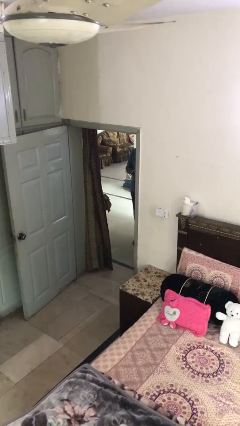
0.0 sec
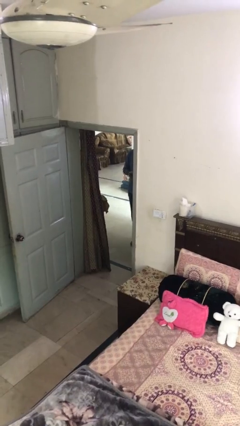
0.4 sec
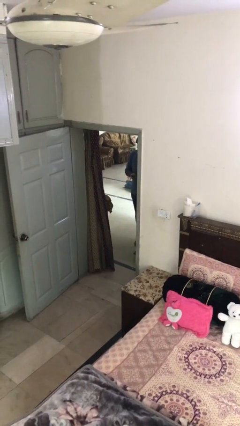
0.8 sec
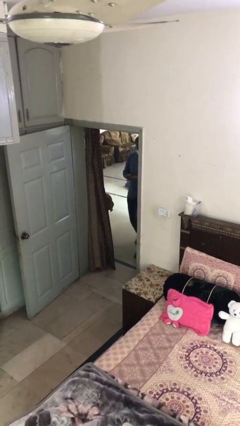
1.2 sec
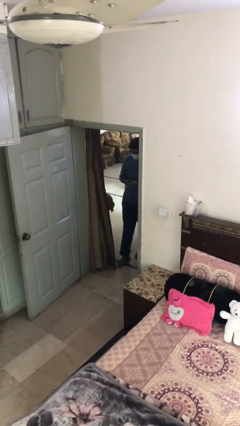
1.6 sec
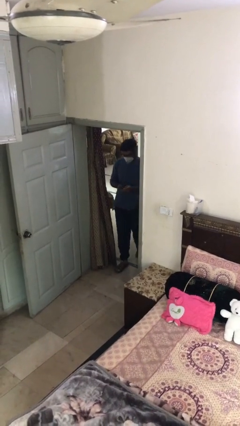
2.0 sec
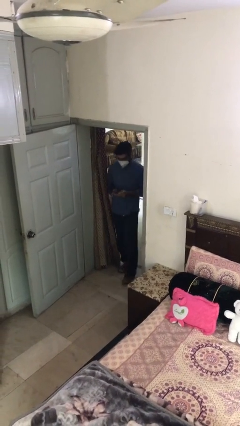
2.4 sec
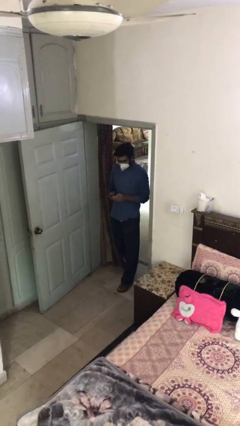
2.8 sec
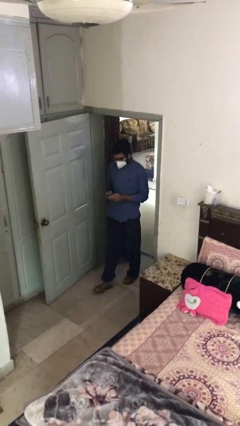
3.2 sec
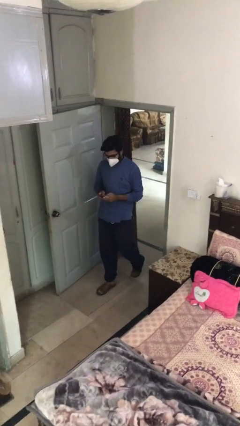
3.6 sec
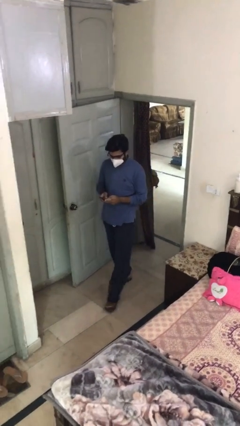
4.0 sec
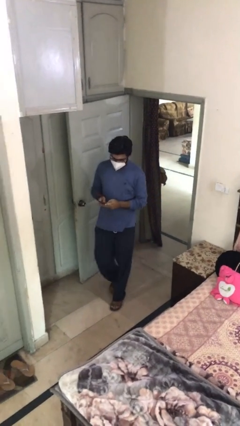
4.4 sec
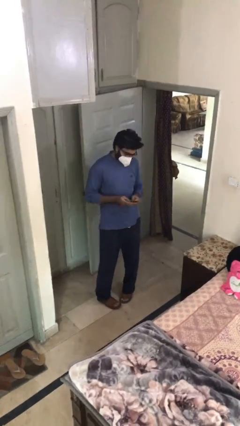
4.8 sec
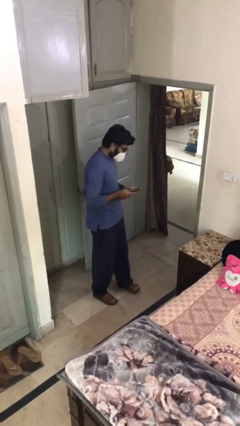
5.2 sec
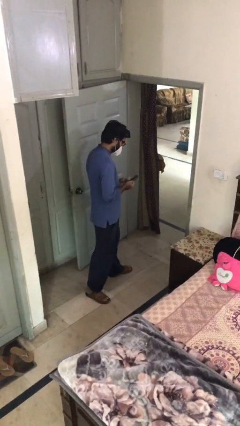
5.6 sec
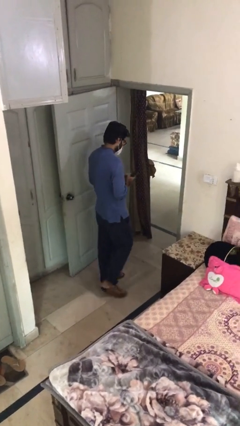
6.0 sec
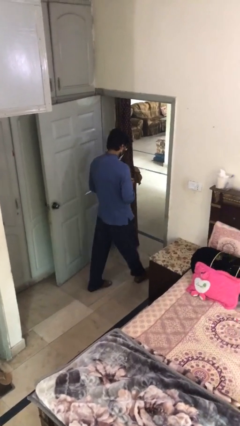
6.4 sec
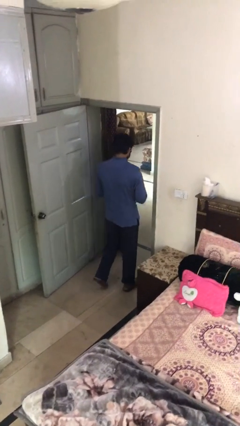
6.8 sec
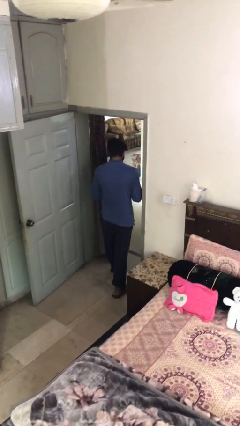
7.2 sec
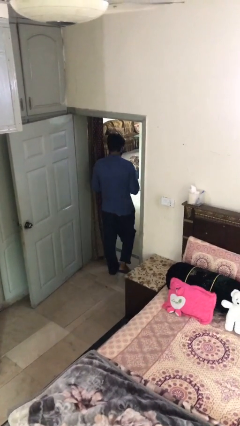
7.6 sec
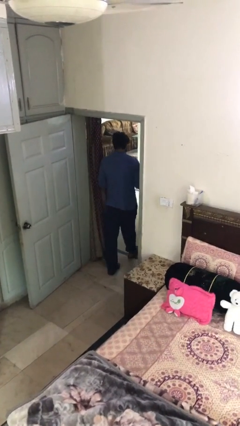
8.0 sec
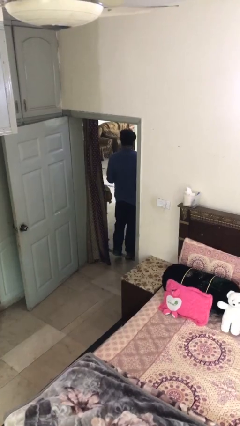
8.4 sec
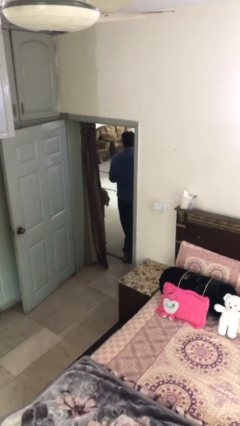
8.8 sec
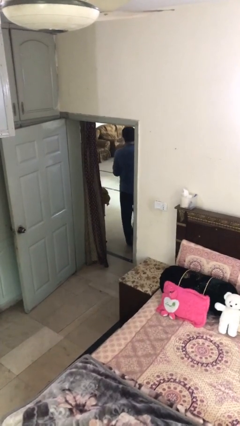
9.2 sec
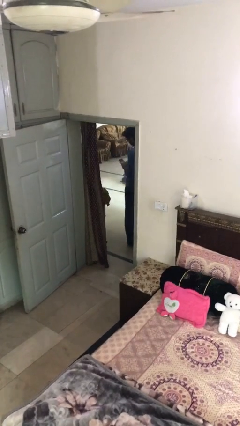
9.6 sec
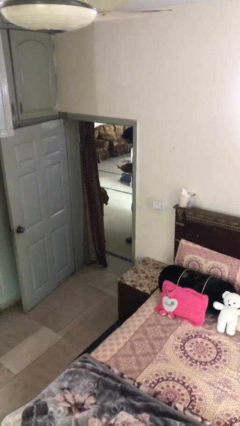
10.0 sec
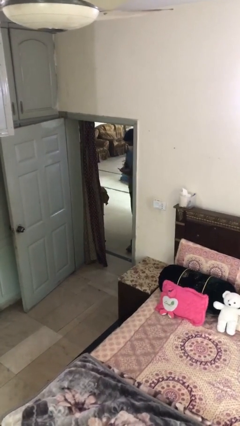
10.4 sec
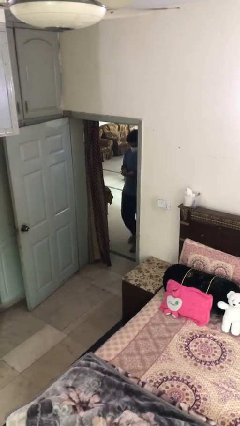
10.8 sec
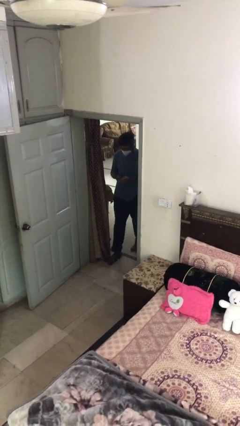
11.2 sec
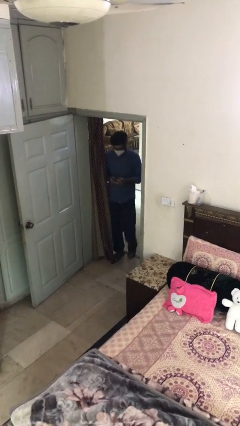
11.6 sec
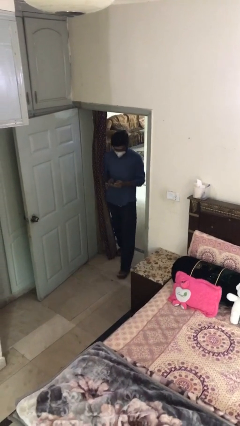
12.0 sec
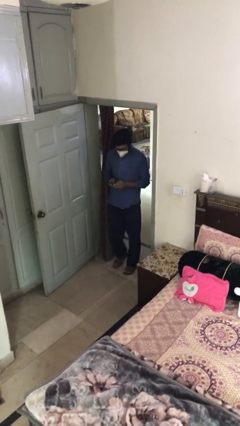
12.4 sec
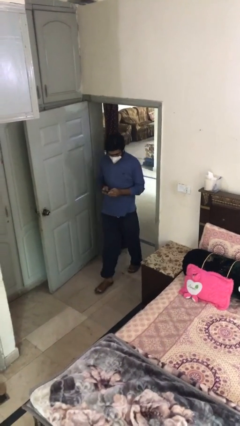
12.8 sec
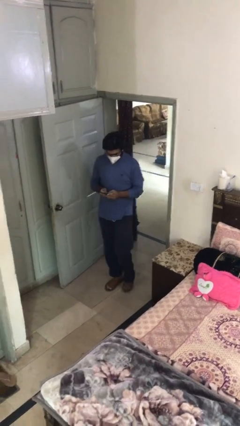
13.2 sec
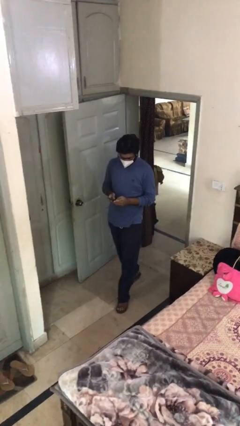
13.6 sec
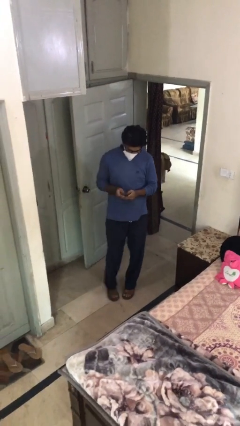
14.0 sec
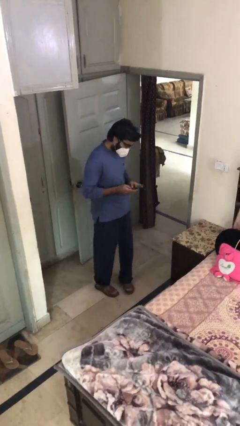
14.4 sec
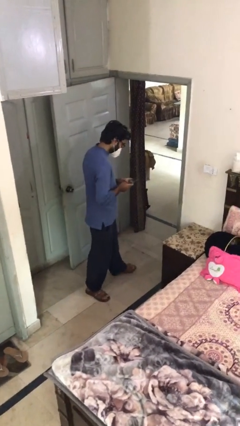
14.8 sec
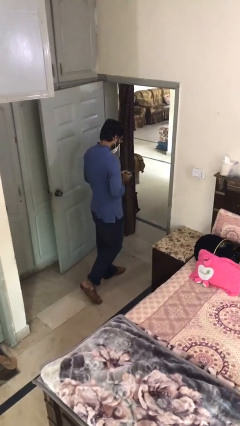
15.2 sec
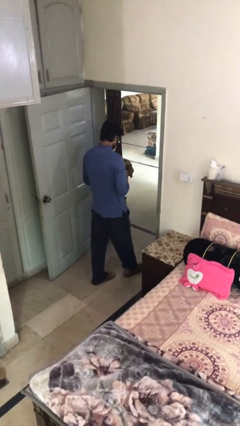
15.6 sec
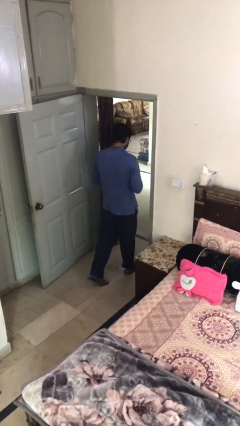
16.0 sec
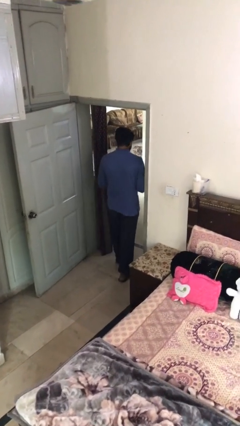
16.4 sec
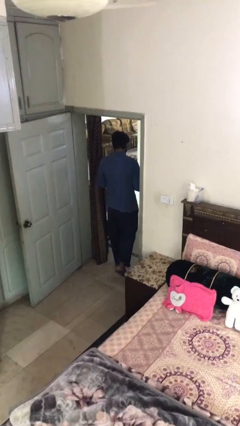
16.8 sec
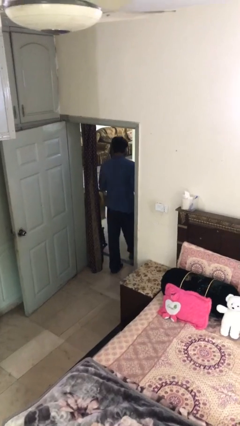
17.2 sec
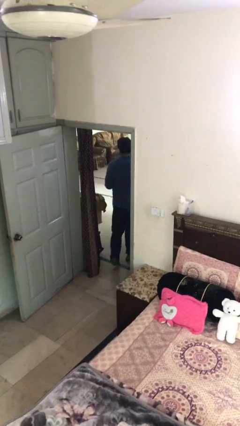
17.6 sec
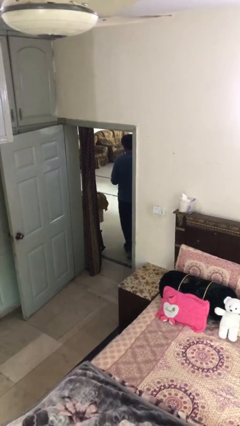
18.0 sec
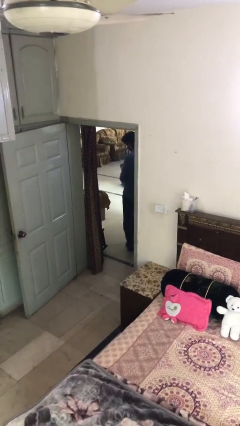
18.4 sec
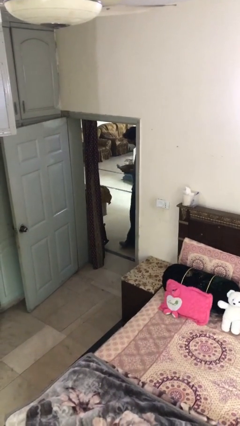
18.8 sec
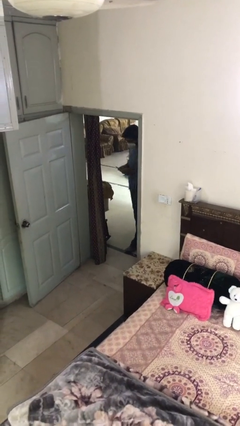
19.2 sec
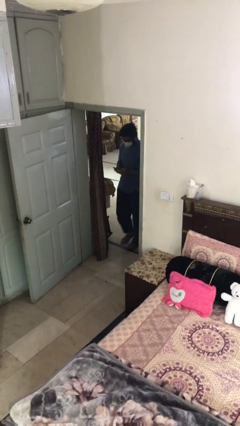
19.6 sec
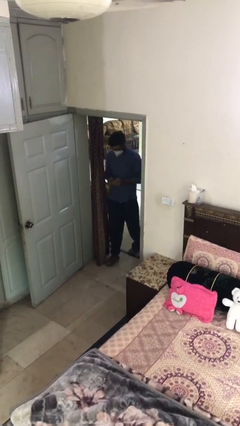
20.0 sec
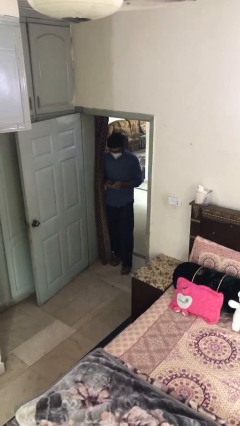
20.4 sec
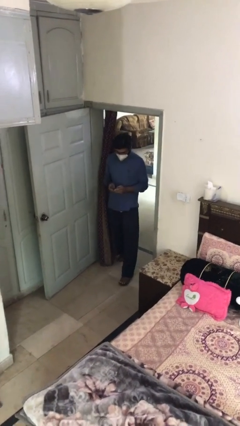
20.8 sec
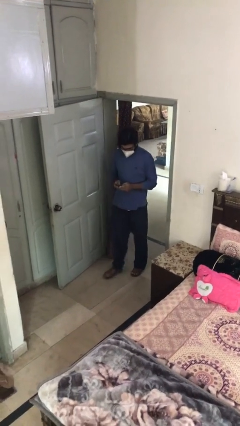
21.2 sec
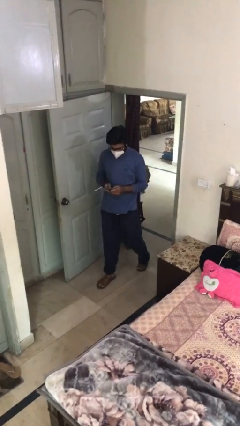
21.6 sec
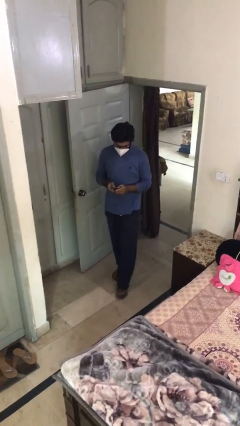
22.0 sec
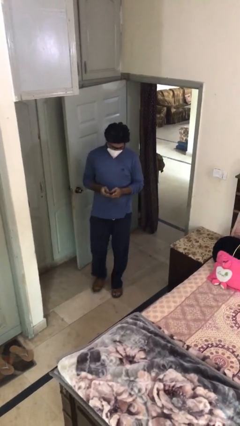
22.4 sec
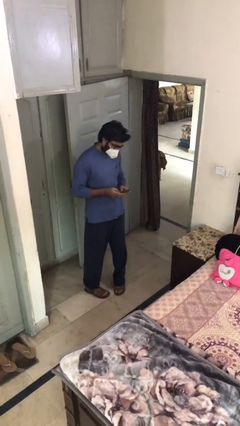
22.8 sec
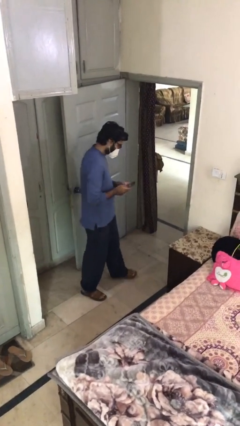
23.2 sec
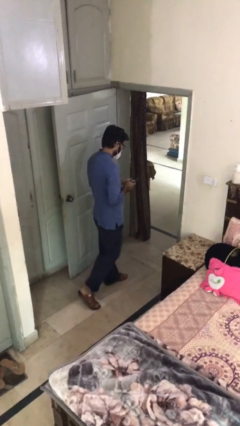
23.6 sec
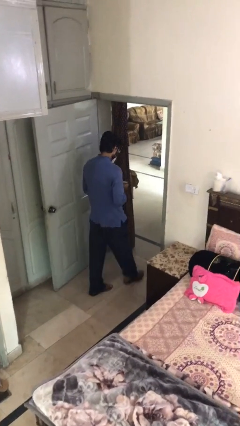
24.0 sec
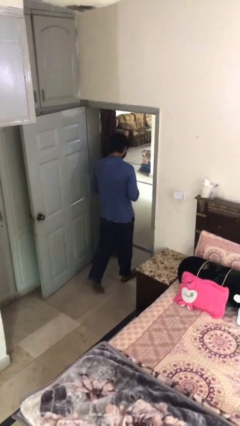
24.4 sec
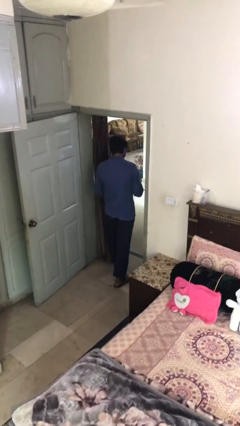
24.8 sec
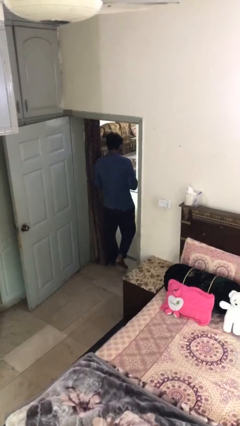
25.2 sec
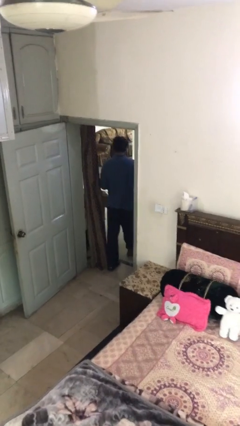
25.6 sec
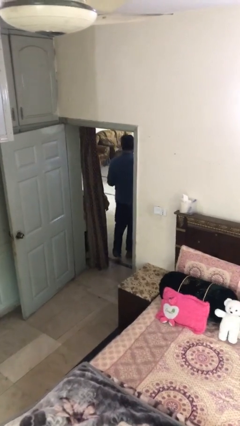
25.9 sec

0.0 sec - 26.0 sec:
person texts on phone

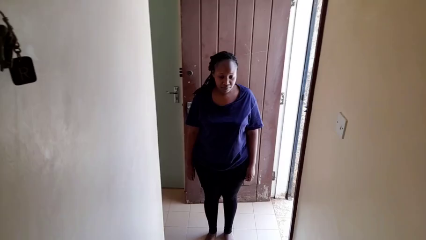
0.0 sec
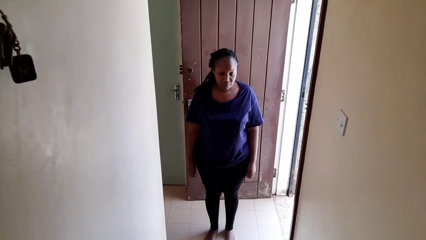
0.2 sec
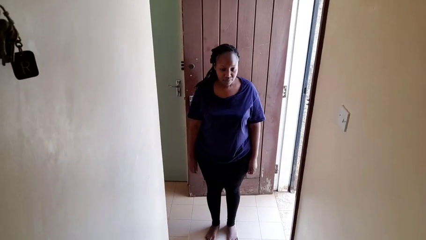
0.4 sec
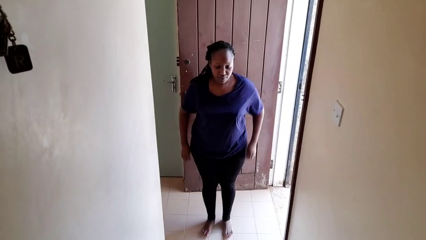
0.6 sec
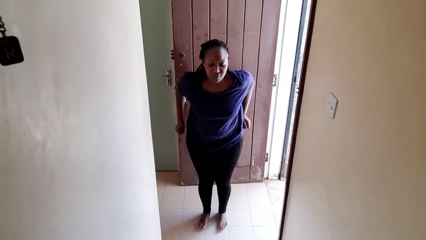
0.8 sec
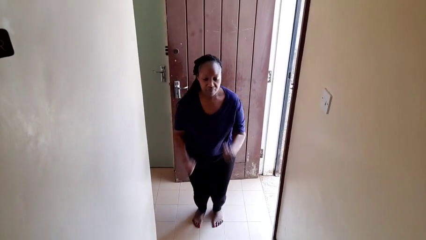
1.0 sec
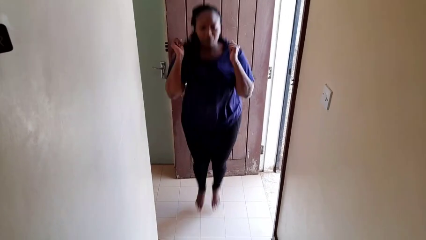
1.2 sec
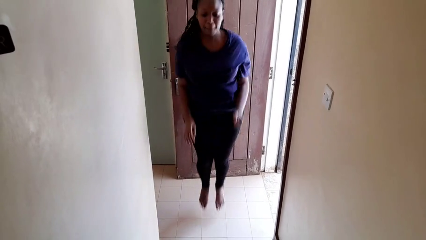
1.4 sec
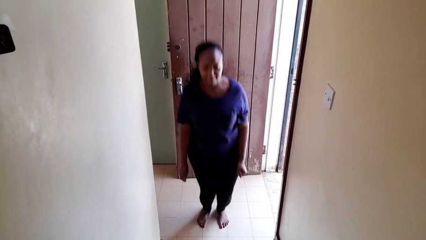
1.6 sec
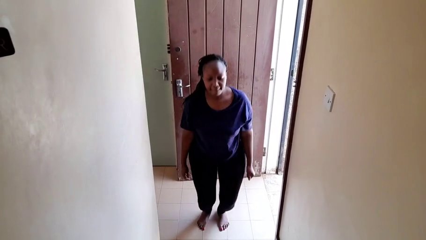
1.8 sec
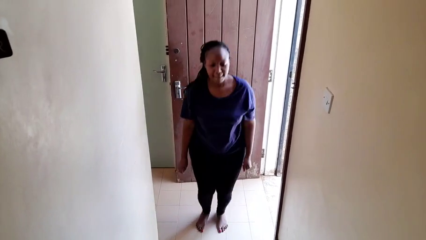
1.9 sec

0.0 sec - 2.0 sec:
person jumps

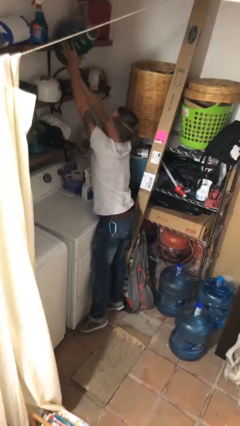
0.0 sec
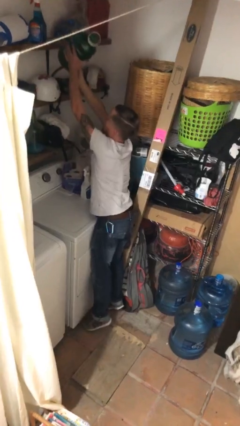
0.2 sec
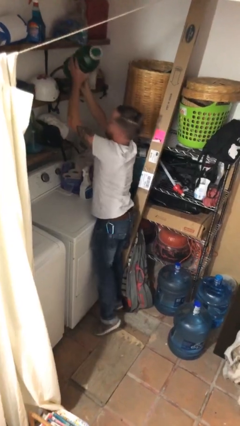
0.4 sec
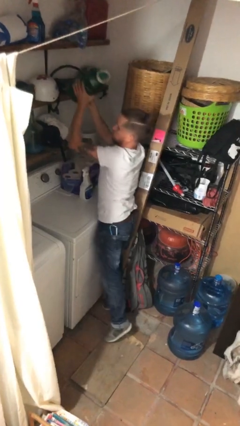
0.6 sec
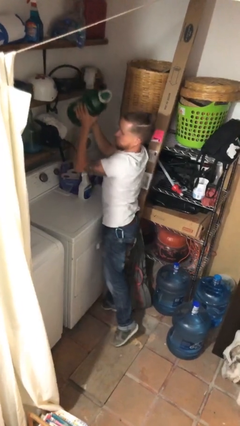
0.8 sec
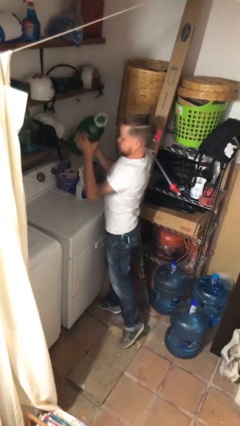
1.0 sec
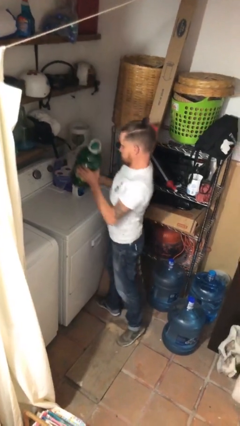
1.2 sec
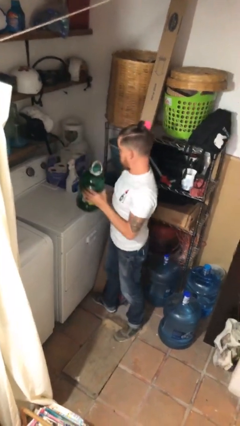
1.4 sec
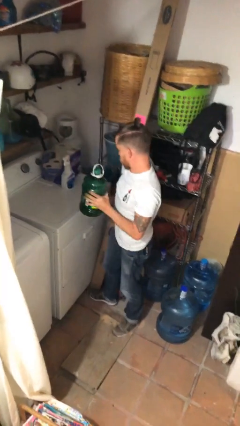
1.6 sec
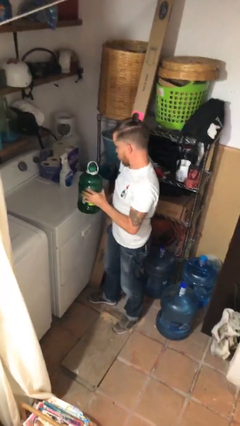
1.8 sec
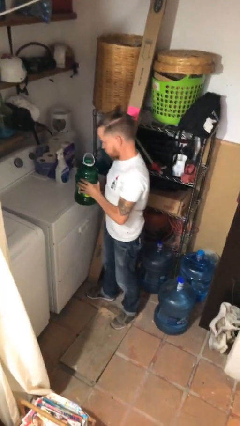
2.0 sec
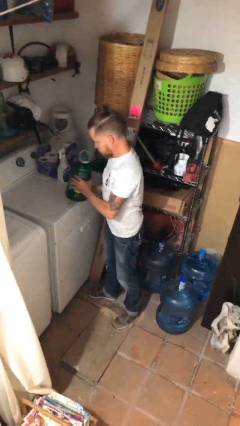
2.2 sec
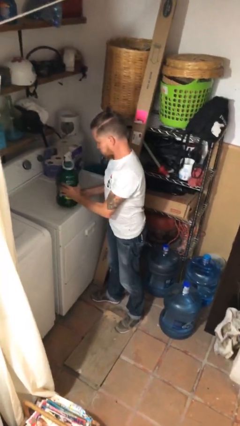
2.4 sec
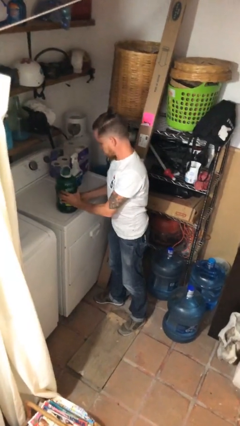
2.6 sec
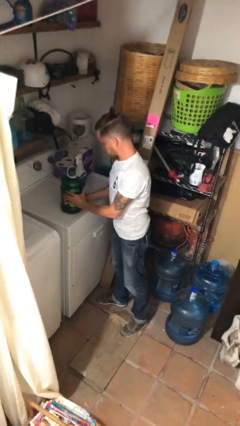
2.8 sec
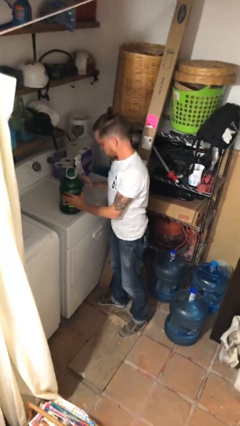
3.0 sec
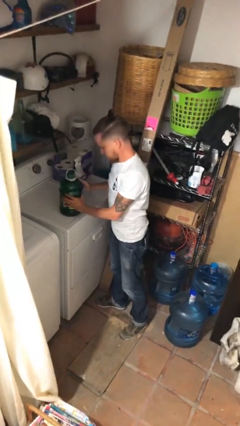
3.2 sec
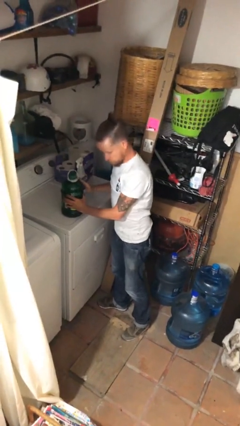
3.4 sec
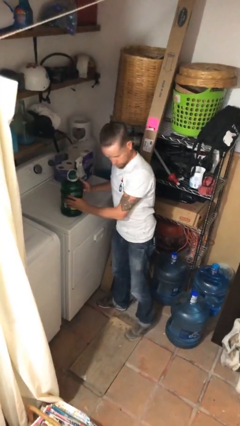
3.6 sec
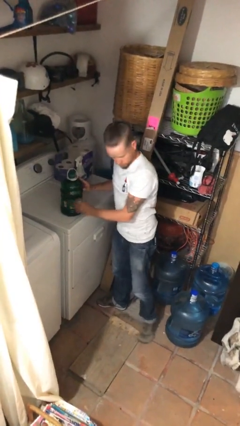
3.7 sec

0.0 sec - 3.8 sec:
person puts down object on table
